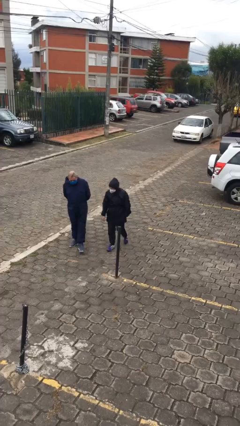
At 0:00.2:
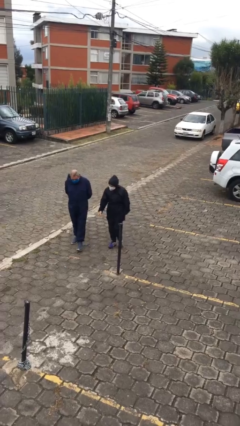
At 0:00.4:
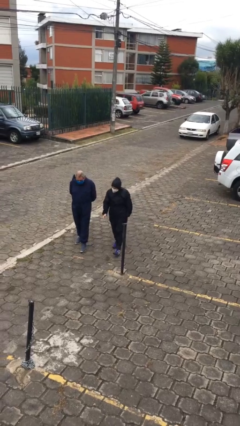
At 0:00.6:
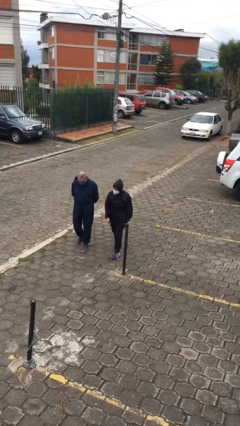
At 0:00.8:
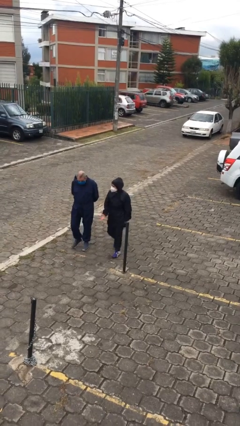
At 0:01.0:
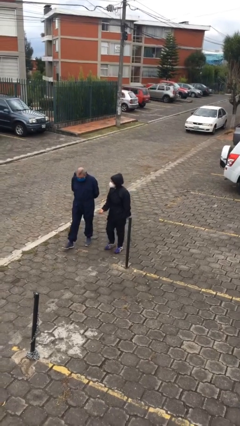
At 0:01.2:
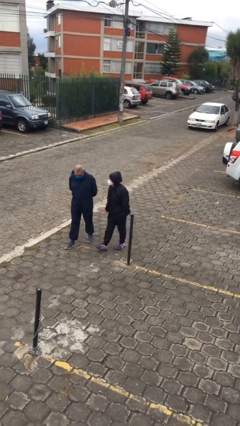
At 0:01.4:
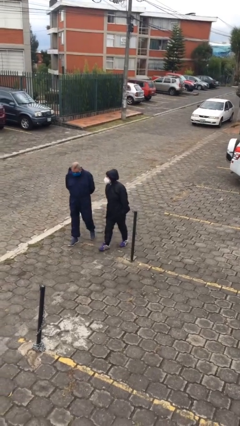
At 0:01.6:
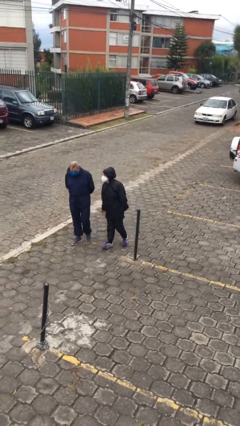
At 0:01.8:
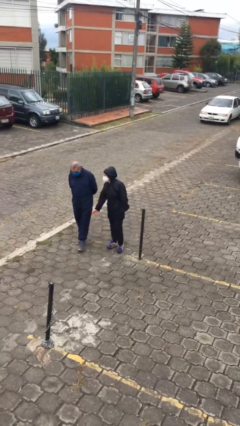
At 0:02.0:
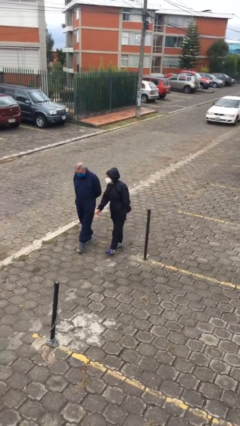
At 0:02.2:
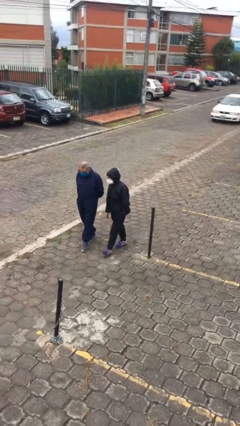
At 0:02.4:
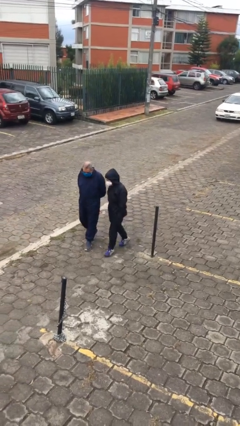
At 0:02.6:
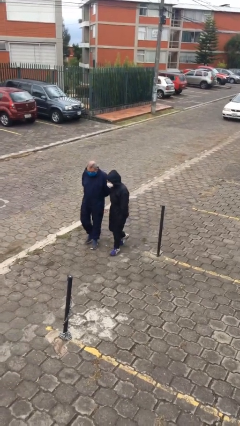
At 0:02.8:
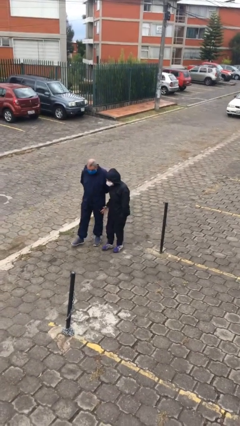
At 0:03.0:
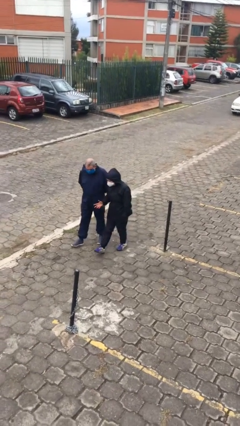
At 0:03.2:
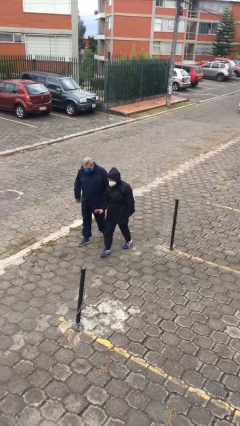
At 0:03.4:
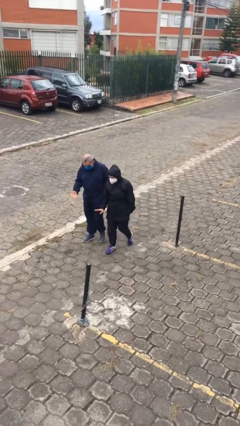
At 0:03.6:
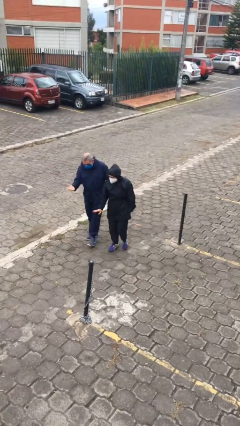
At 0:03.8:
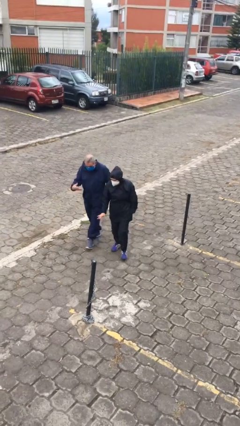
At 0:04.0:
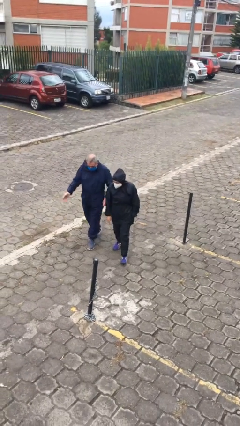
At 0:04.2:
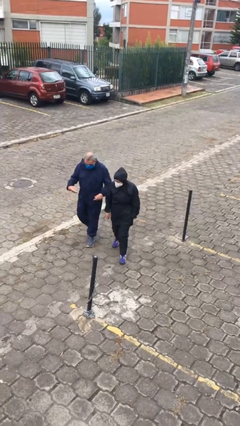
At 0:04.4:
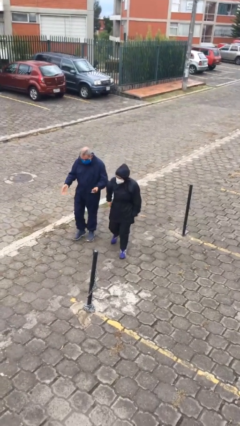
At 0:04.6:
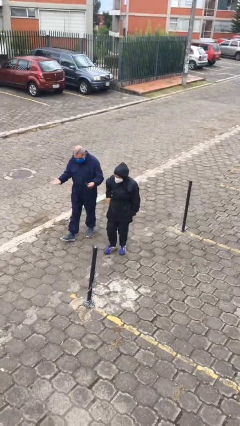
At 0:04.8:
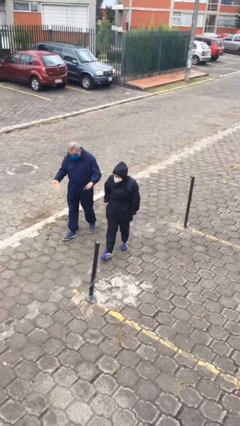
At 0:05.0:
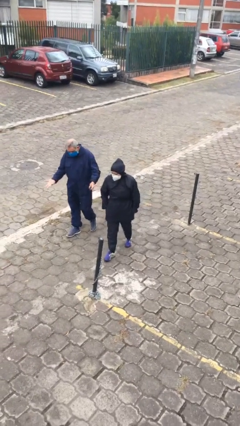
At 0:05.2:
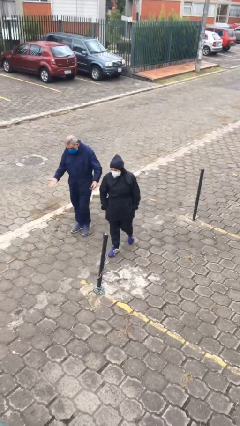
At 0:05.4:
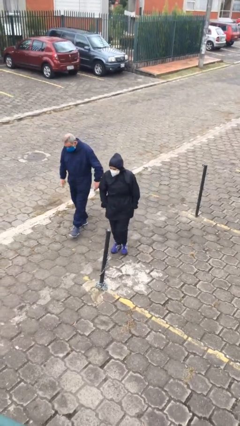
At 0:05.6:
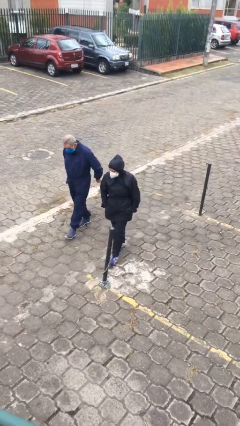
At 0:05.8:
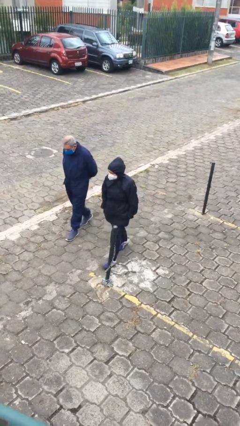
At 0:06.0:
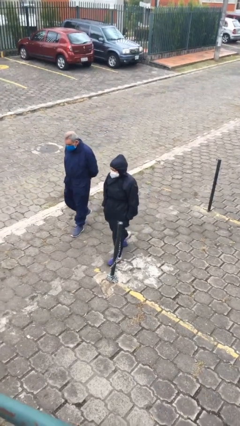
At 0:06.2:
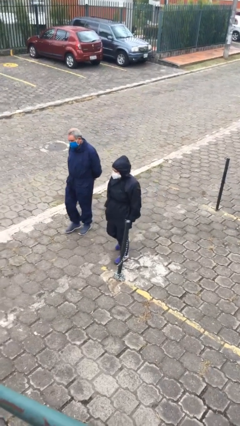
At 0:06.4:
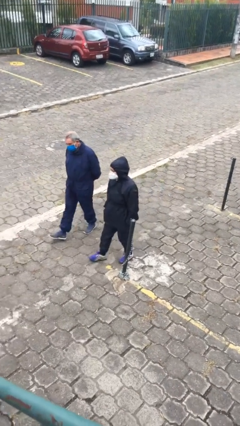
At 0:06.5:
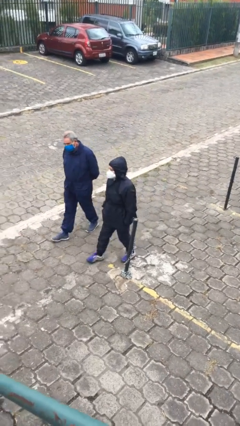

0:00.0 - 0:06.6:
person talks to person

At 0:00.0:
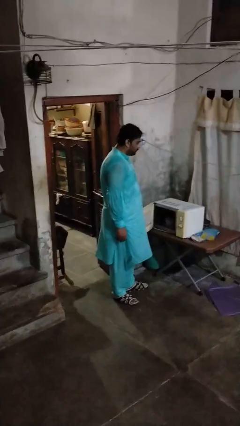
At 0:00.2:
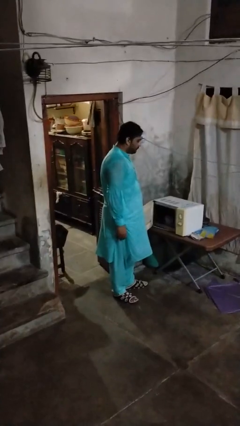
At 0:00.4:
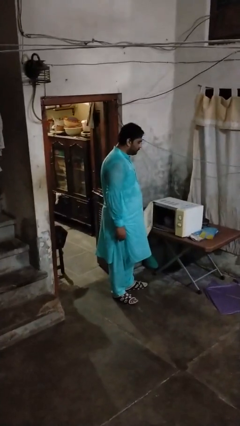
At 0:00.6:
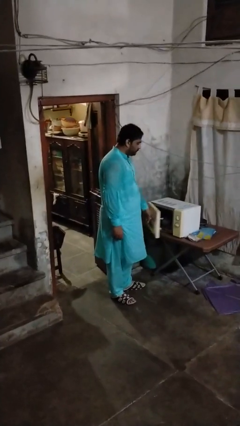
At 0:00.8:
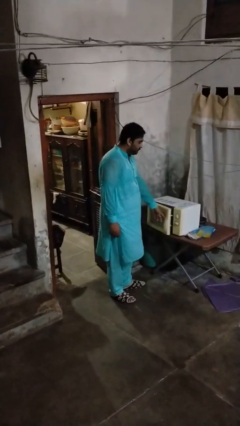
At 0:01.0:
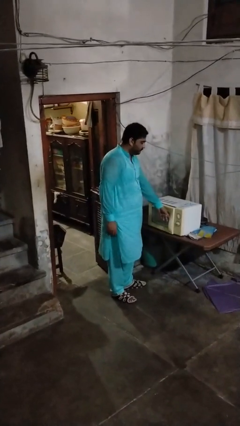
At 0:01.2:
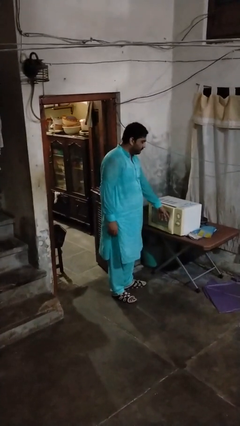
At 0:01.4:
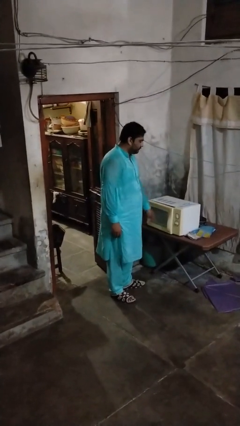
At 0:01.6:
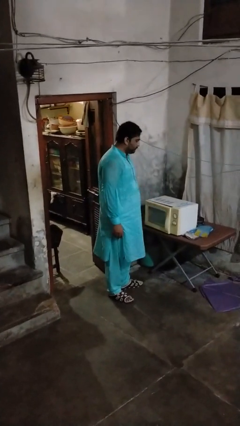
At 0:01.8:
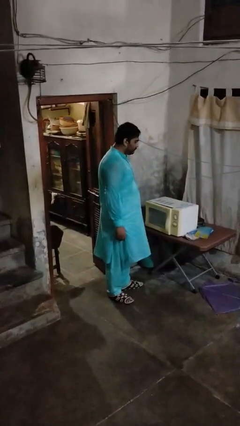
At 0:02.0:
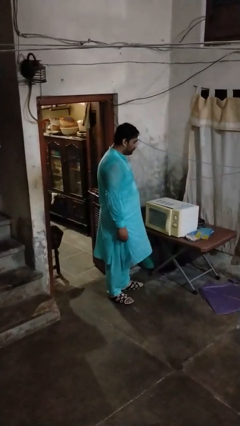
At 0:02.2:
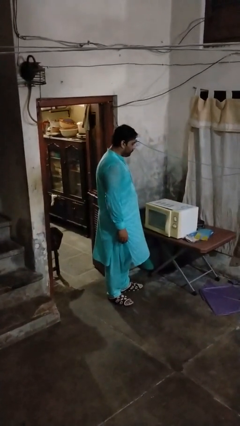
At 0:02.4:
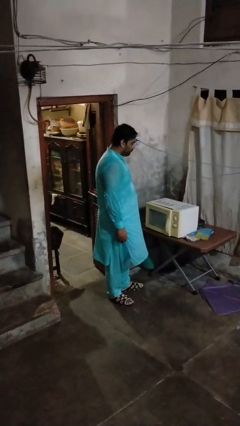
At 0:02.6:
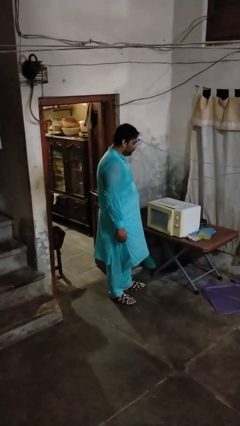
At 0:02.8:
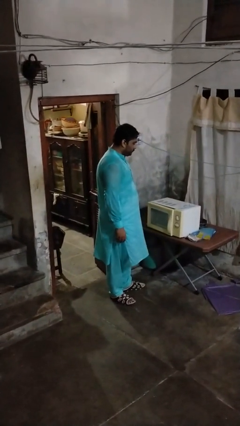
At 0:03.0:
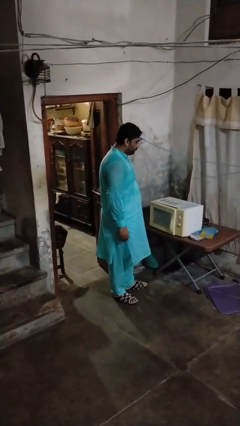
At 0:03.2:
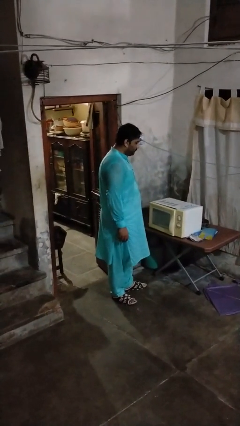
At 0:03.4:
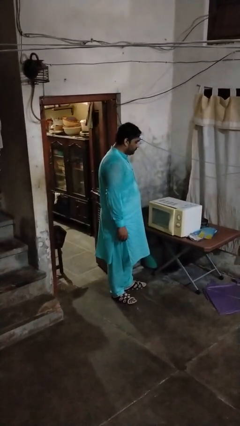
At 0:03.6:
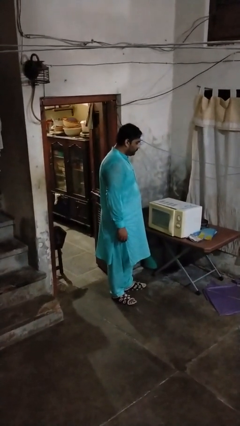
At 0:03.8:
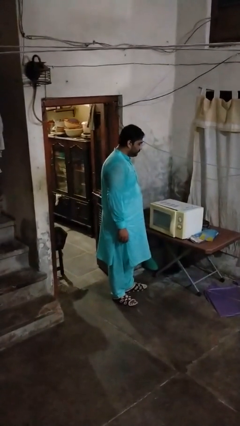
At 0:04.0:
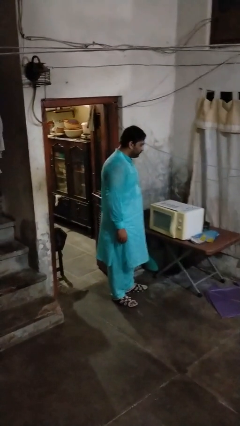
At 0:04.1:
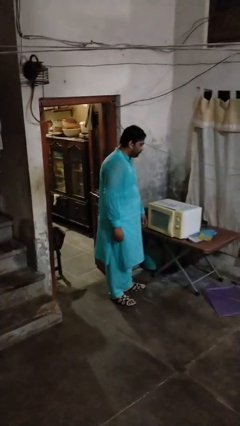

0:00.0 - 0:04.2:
person closes microwave

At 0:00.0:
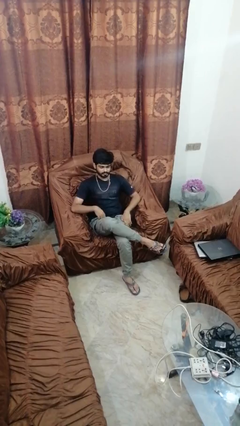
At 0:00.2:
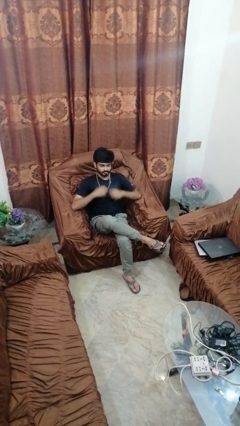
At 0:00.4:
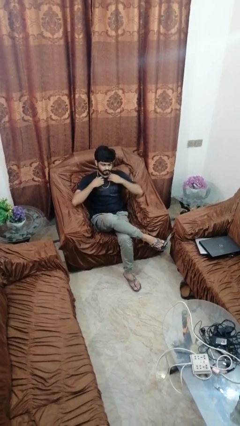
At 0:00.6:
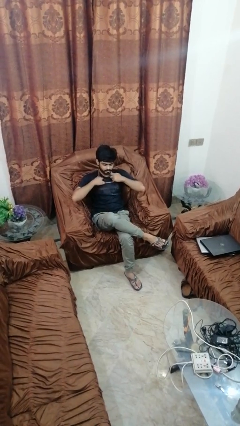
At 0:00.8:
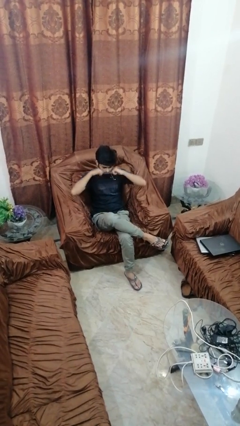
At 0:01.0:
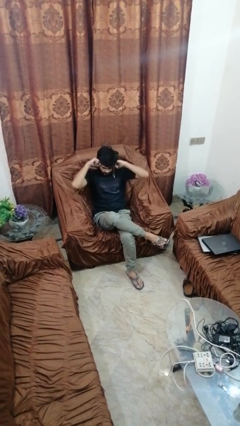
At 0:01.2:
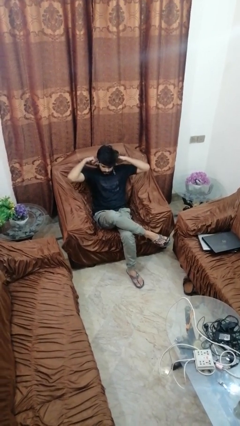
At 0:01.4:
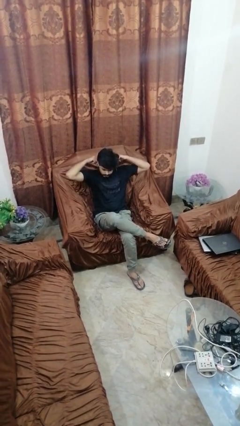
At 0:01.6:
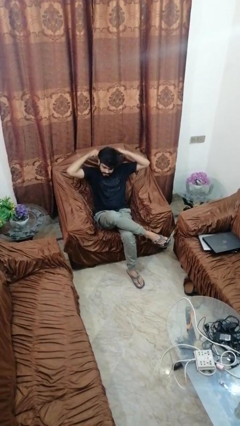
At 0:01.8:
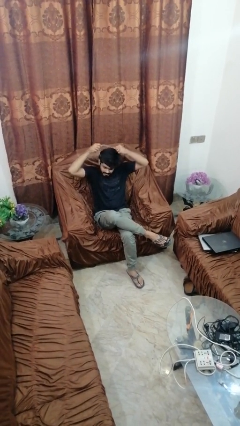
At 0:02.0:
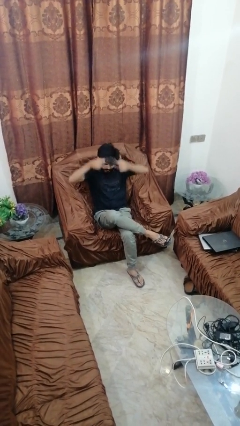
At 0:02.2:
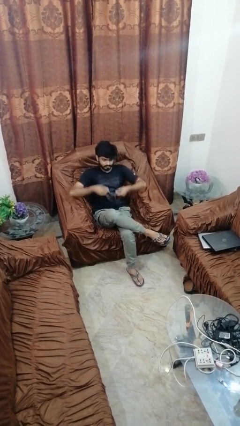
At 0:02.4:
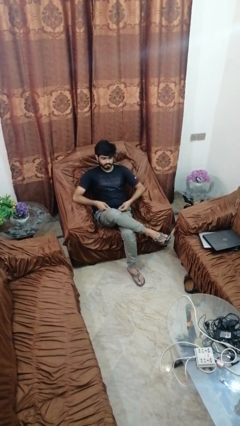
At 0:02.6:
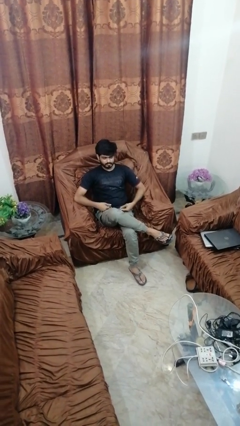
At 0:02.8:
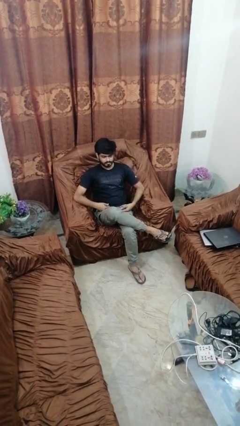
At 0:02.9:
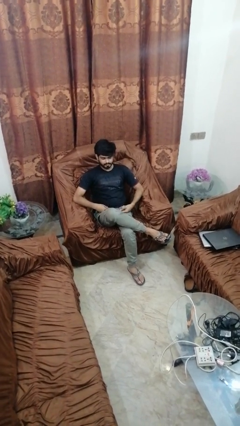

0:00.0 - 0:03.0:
person takes off necklace

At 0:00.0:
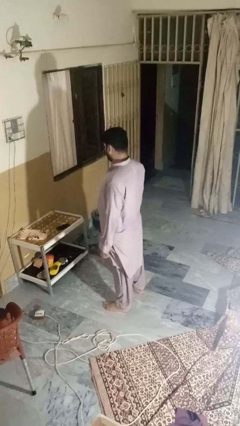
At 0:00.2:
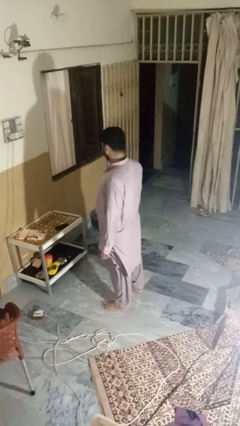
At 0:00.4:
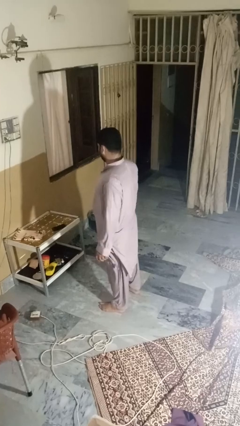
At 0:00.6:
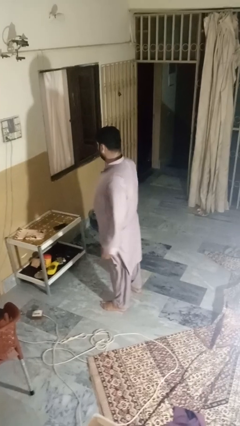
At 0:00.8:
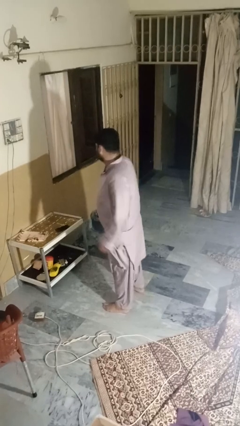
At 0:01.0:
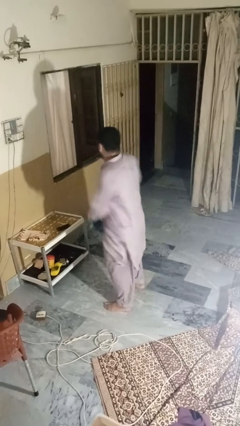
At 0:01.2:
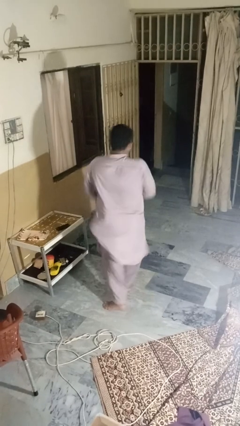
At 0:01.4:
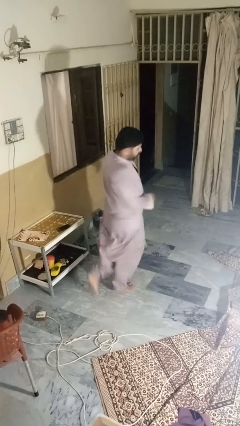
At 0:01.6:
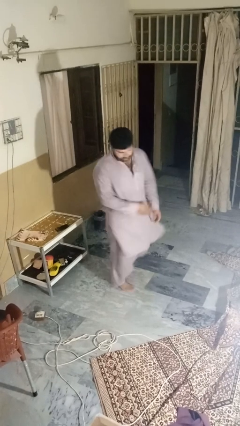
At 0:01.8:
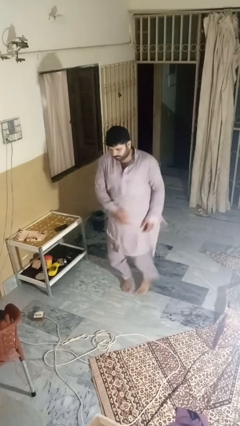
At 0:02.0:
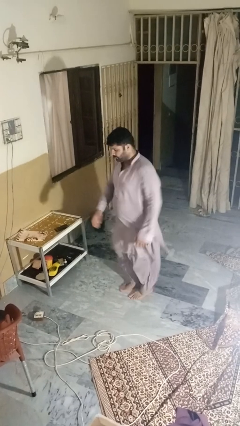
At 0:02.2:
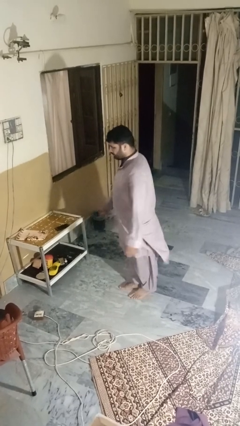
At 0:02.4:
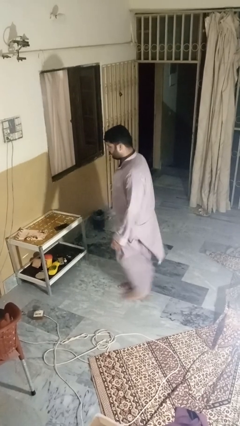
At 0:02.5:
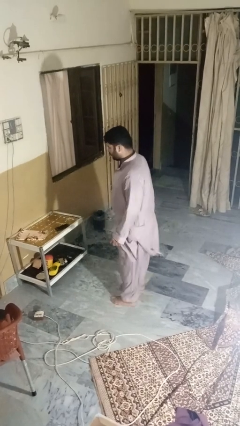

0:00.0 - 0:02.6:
person twirls

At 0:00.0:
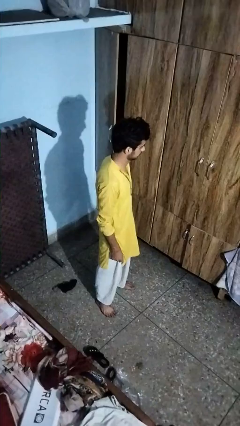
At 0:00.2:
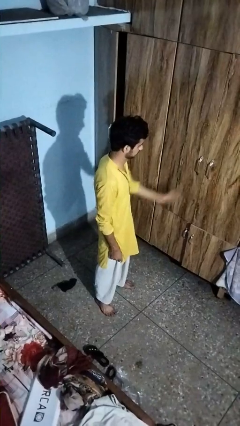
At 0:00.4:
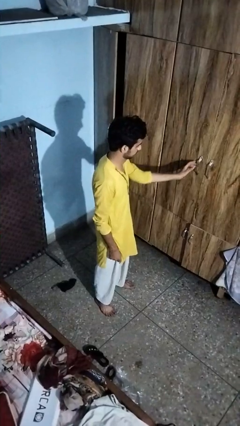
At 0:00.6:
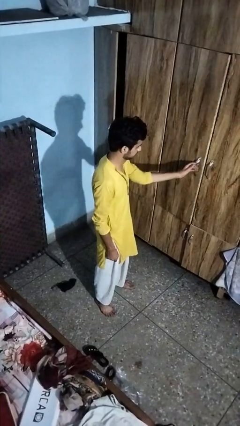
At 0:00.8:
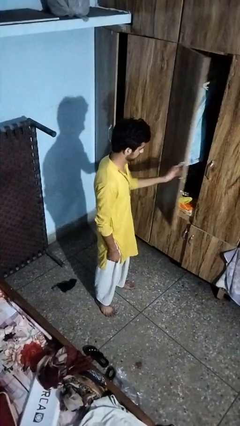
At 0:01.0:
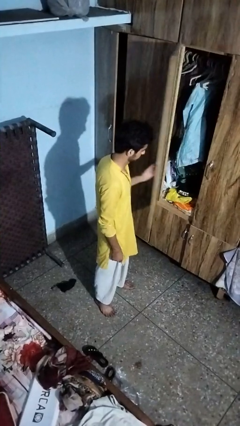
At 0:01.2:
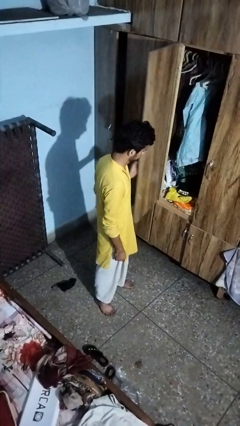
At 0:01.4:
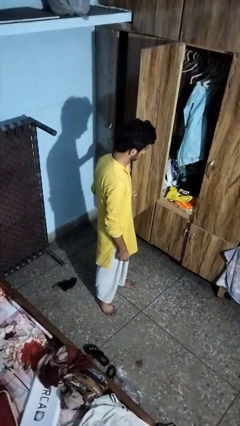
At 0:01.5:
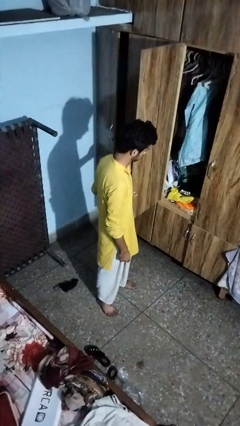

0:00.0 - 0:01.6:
person opens closet door
